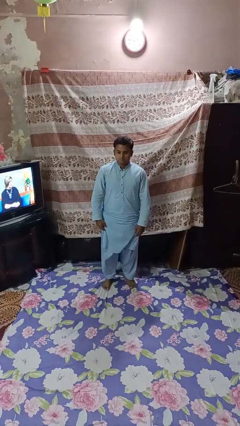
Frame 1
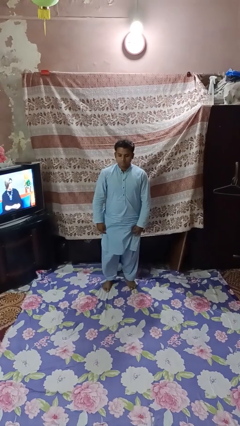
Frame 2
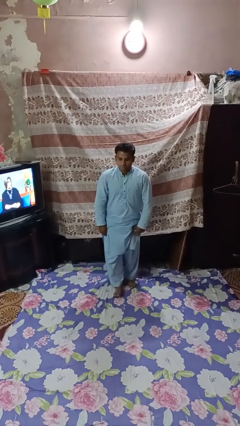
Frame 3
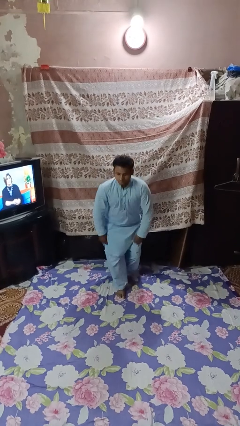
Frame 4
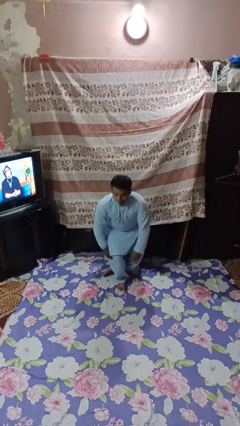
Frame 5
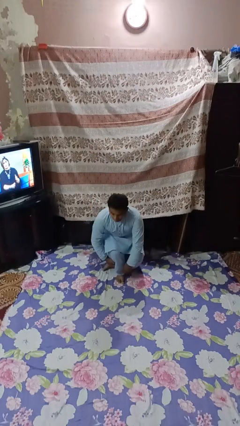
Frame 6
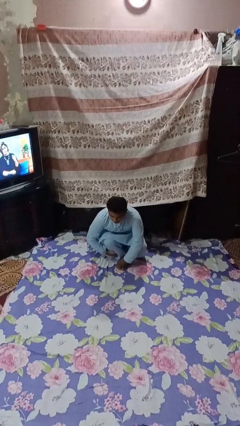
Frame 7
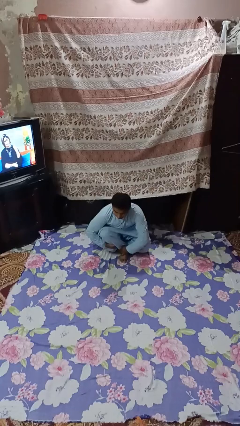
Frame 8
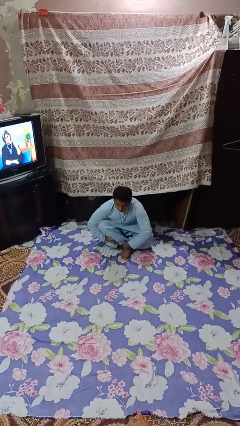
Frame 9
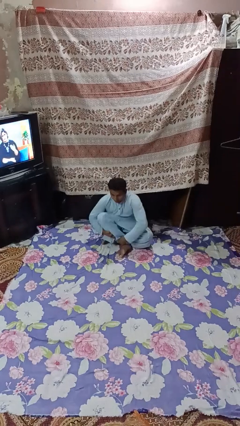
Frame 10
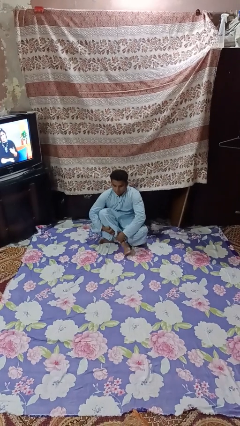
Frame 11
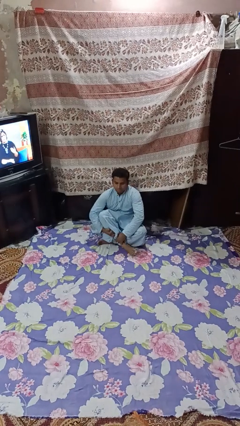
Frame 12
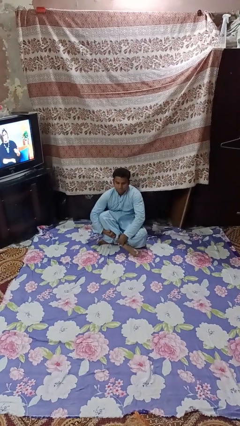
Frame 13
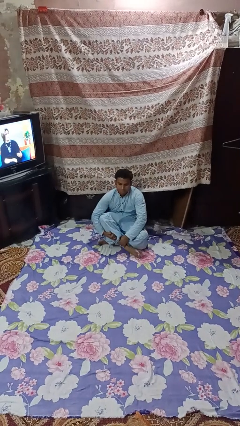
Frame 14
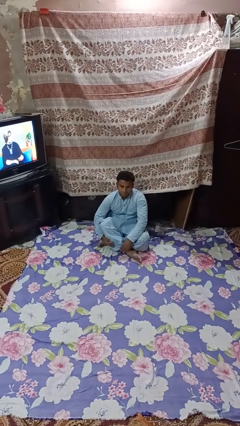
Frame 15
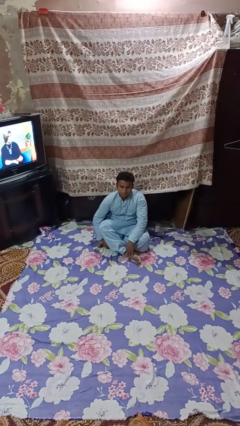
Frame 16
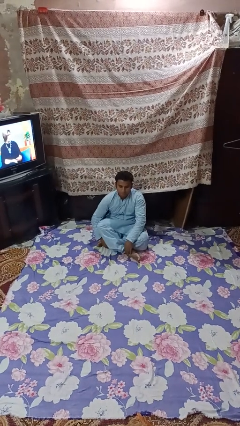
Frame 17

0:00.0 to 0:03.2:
person sits crisscross

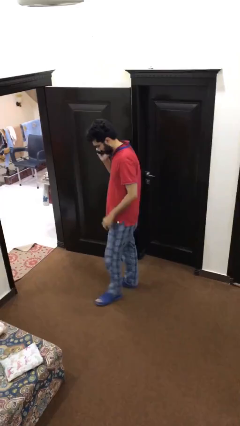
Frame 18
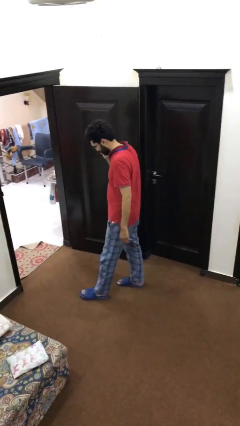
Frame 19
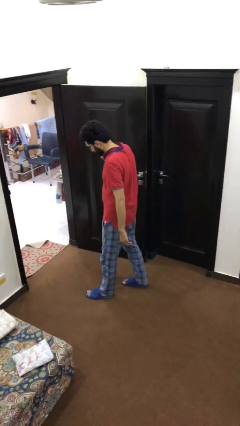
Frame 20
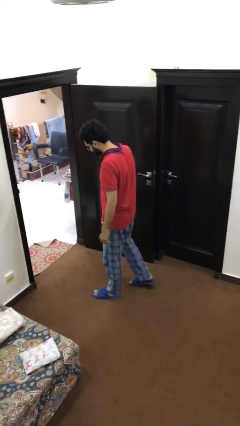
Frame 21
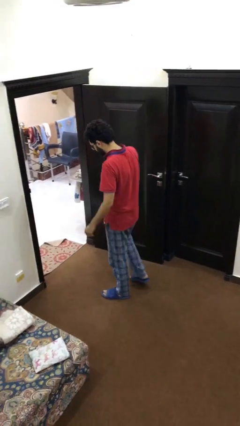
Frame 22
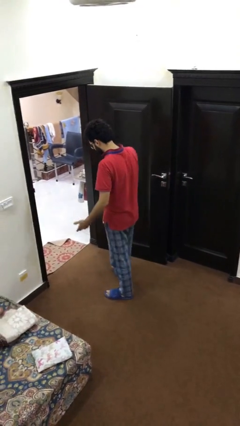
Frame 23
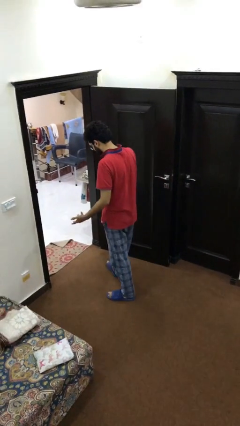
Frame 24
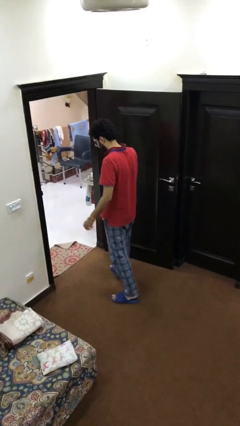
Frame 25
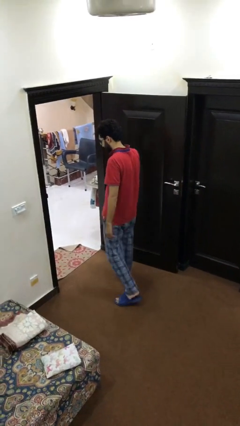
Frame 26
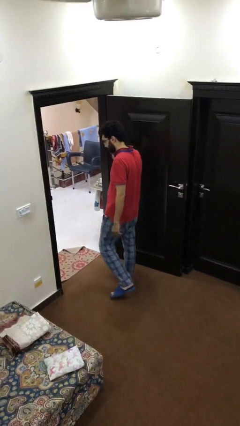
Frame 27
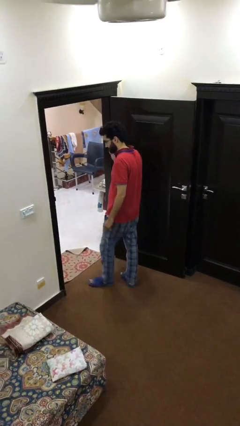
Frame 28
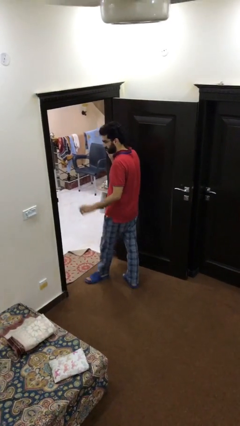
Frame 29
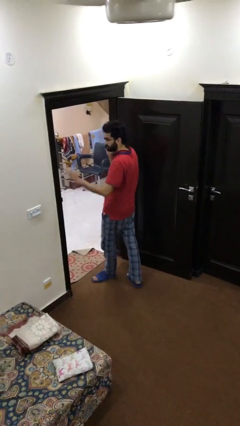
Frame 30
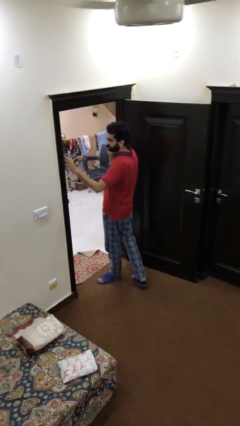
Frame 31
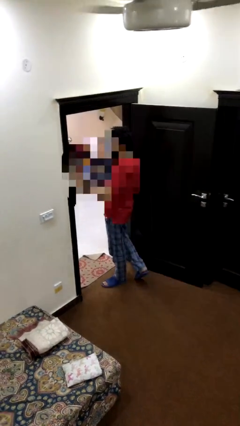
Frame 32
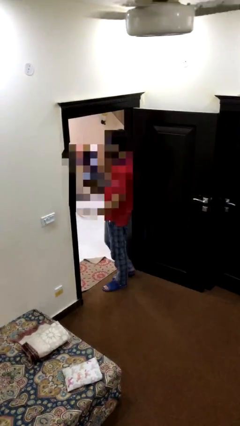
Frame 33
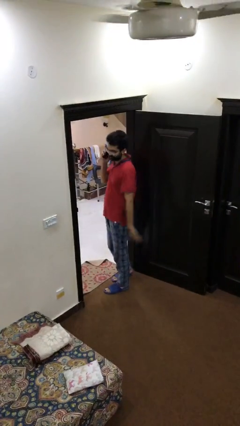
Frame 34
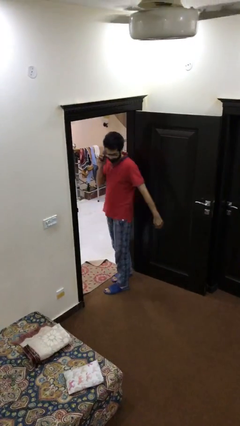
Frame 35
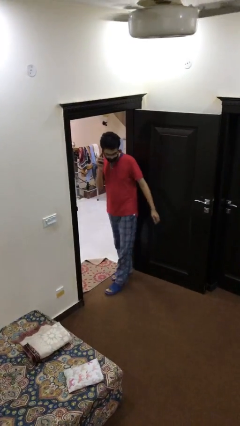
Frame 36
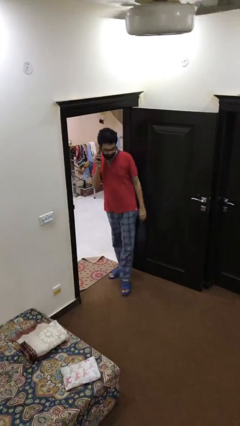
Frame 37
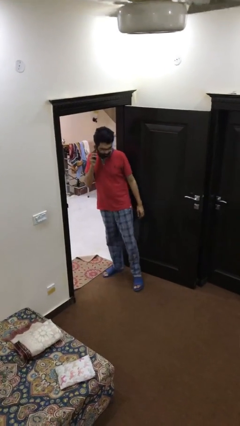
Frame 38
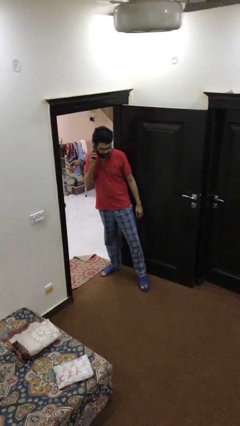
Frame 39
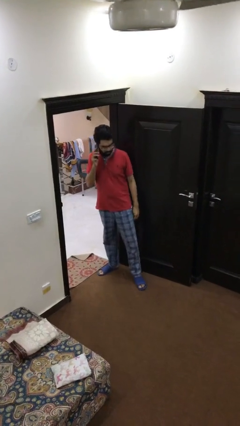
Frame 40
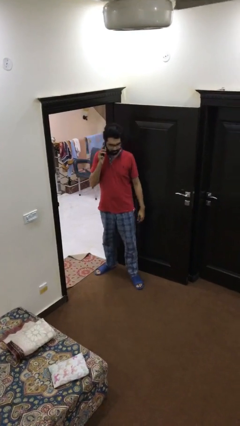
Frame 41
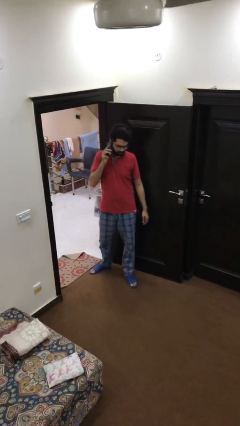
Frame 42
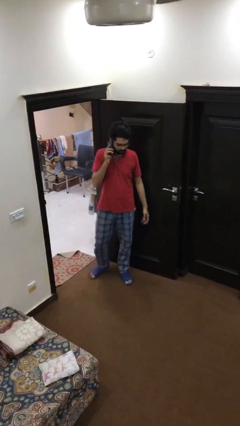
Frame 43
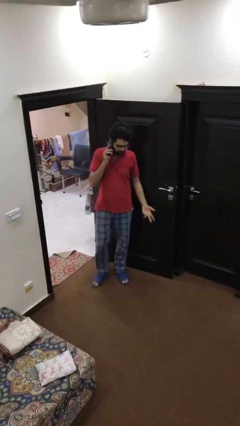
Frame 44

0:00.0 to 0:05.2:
person talks on phone

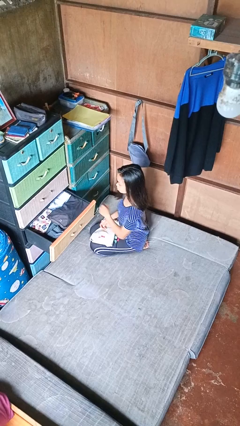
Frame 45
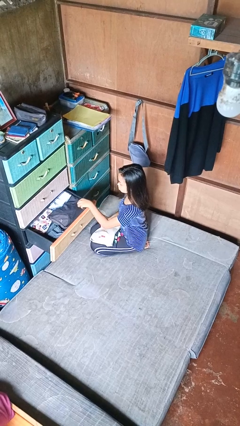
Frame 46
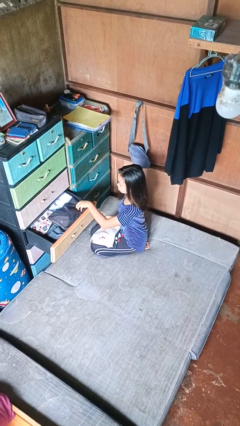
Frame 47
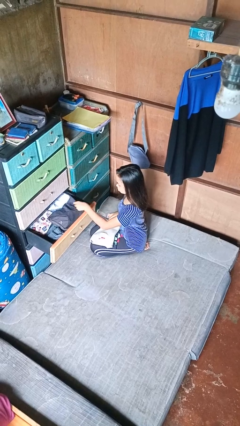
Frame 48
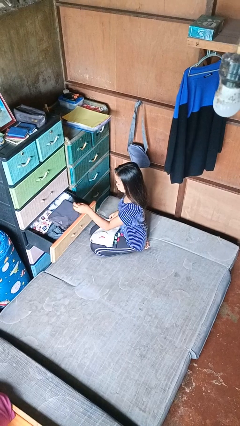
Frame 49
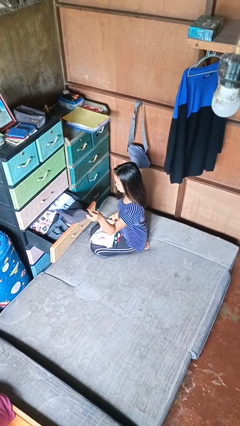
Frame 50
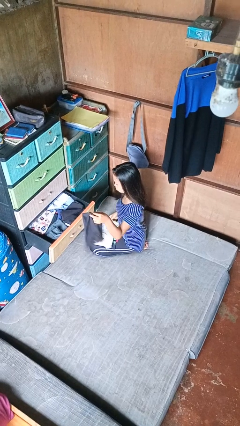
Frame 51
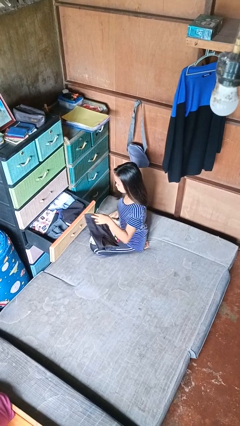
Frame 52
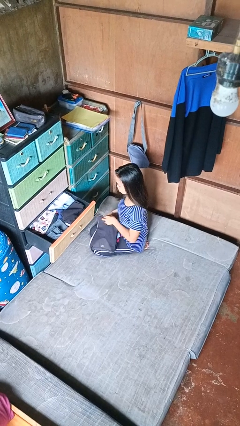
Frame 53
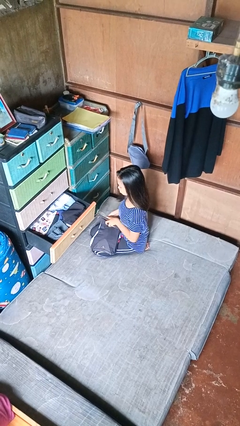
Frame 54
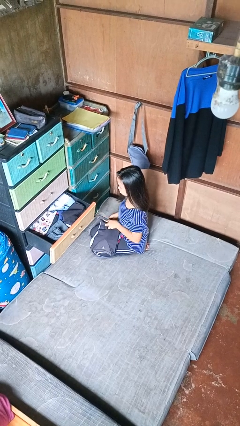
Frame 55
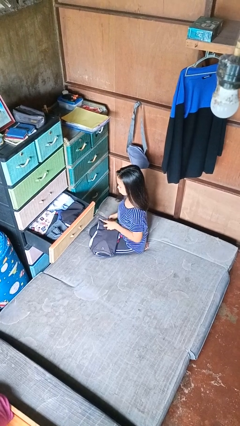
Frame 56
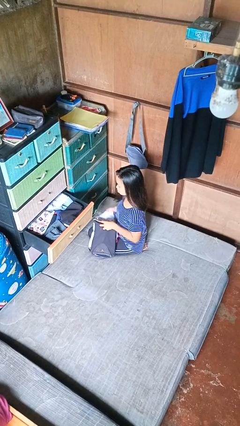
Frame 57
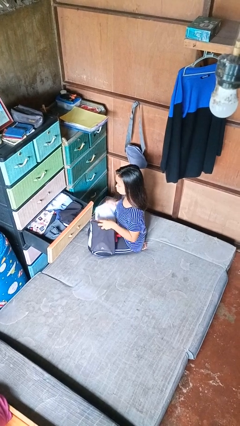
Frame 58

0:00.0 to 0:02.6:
person takes clothes from dresser

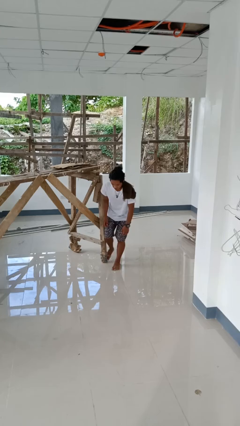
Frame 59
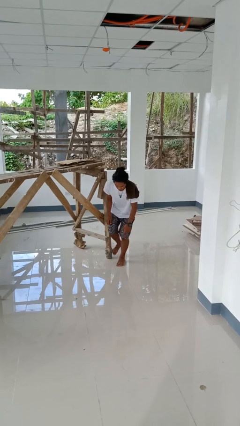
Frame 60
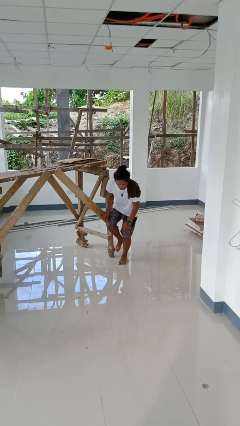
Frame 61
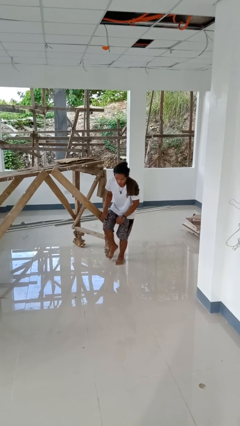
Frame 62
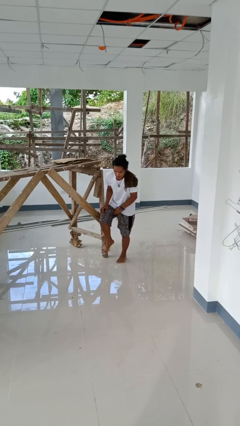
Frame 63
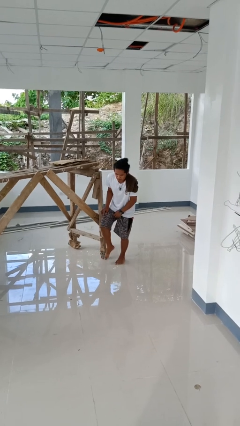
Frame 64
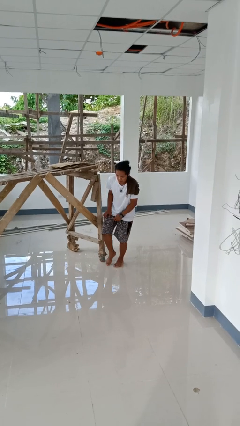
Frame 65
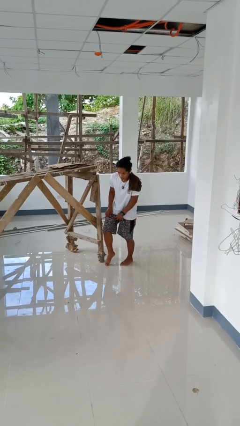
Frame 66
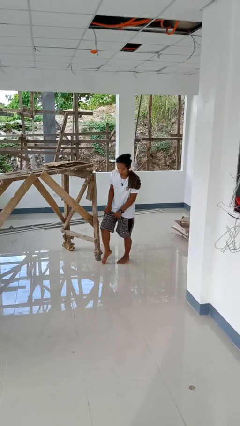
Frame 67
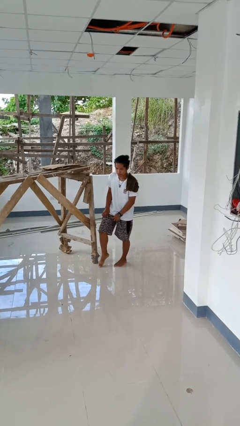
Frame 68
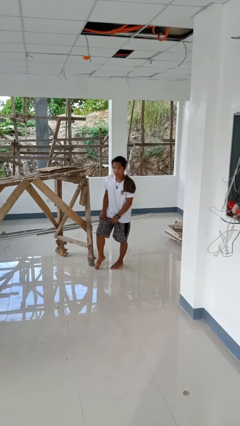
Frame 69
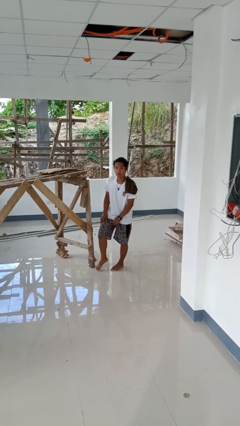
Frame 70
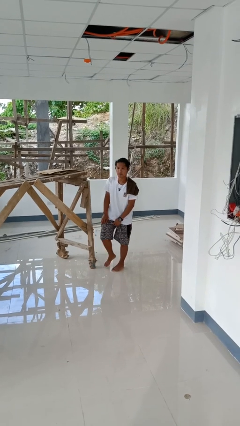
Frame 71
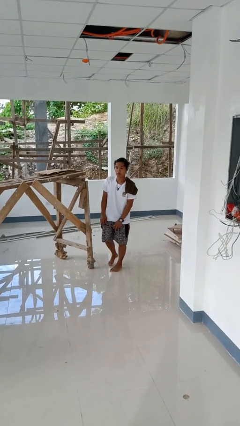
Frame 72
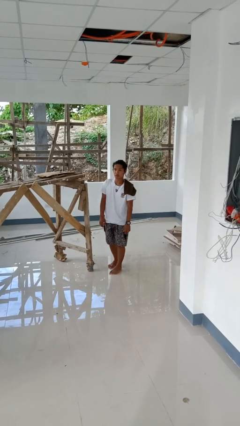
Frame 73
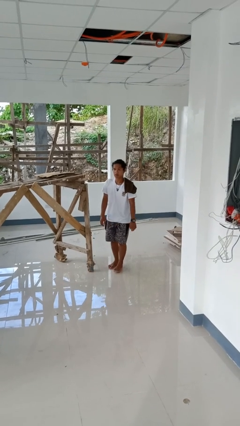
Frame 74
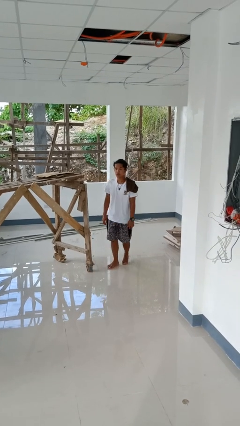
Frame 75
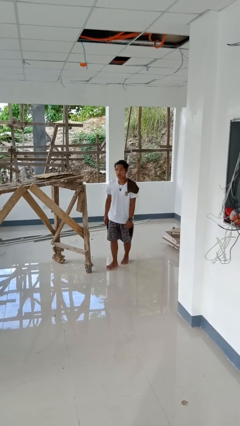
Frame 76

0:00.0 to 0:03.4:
person stubs toe

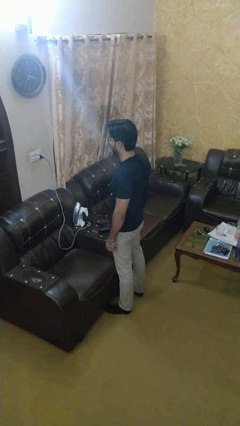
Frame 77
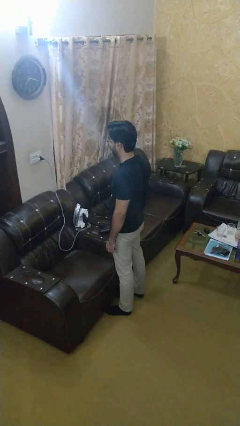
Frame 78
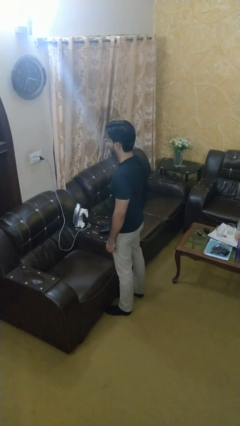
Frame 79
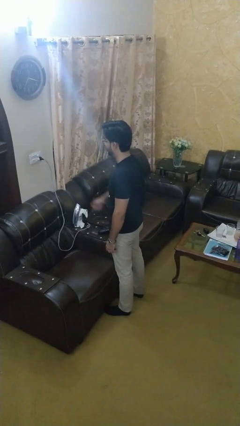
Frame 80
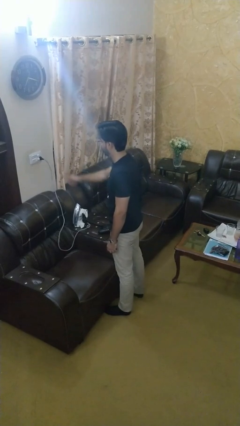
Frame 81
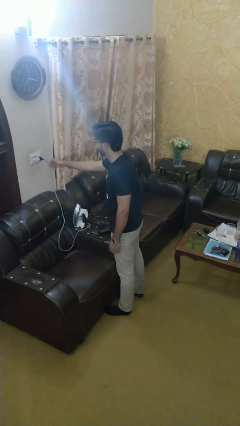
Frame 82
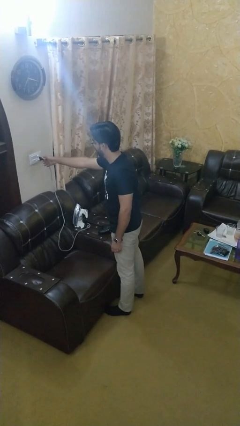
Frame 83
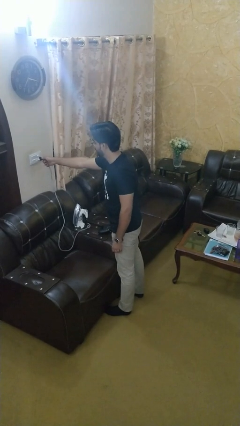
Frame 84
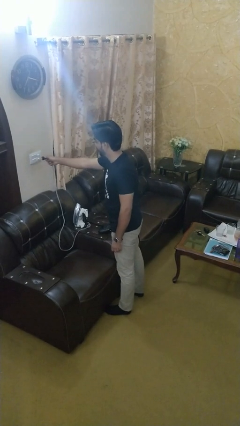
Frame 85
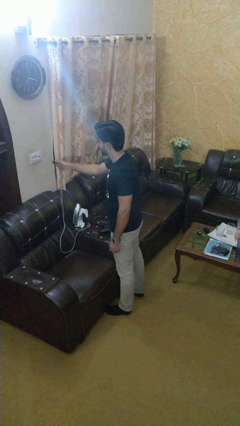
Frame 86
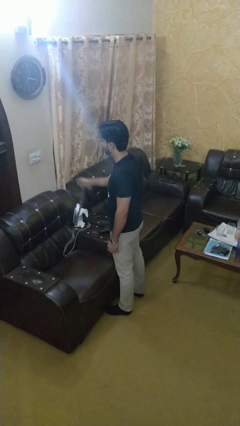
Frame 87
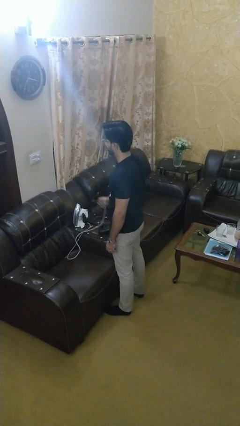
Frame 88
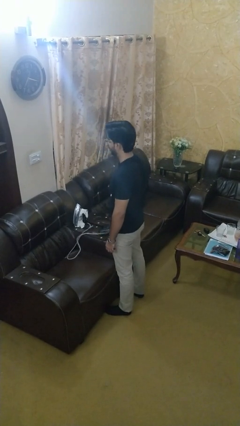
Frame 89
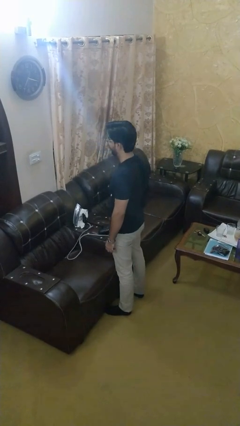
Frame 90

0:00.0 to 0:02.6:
person unplugs from electrical socket

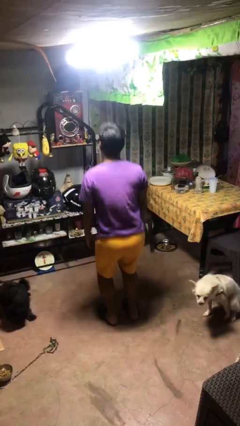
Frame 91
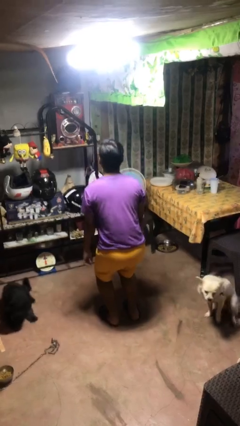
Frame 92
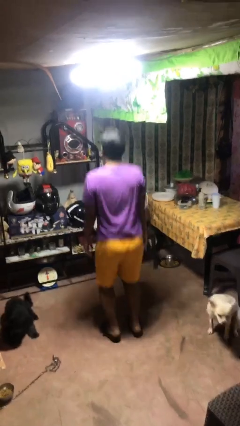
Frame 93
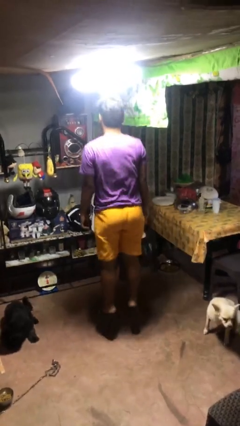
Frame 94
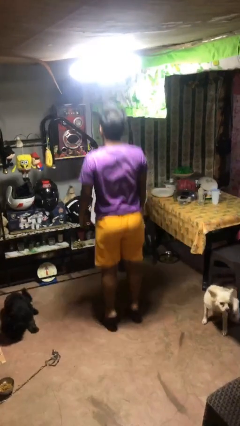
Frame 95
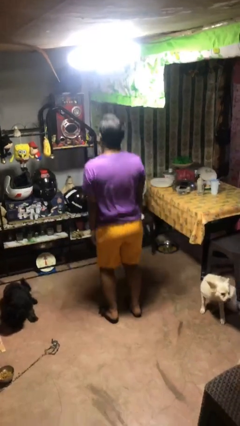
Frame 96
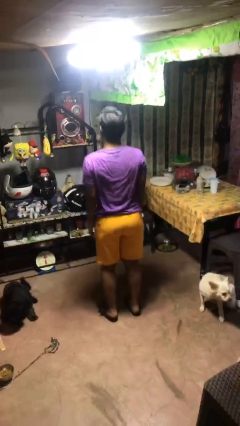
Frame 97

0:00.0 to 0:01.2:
person jumps
